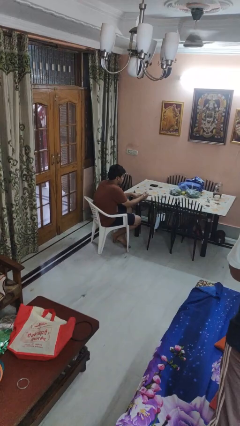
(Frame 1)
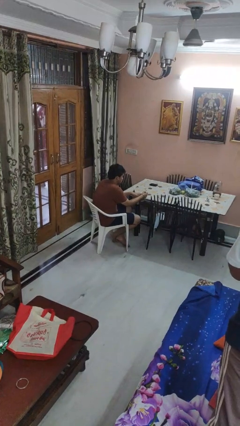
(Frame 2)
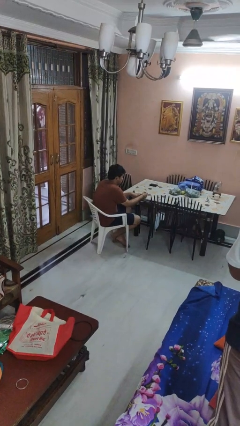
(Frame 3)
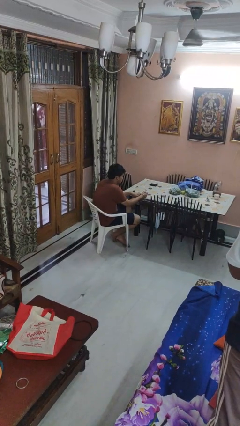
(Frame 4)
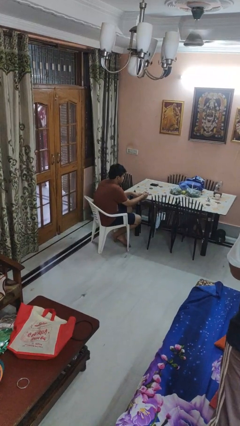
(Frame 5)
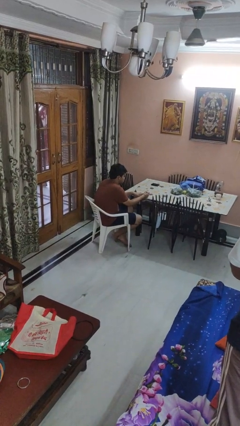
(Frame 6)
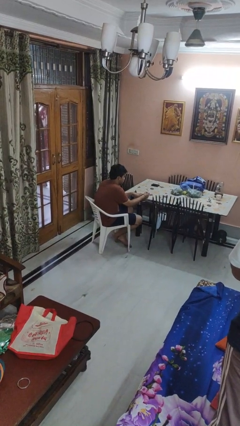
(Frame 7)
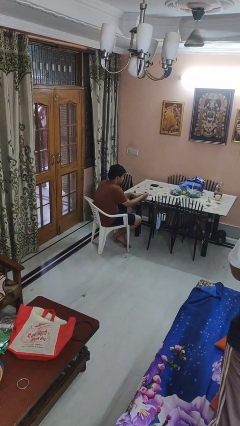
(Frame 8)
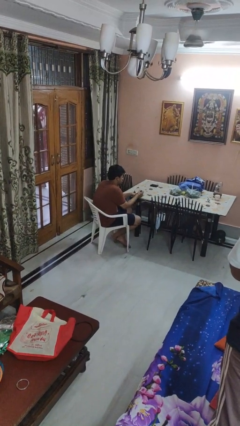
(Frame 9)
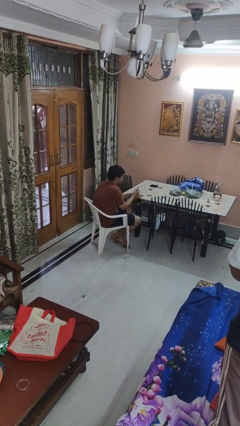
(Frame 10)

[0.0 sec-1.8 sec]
person paints fingernails

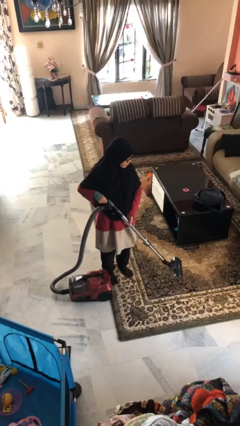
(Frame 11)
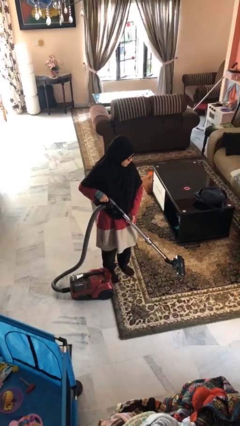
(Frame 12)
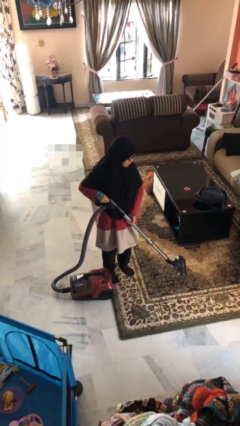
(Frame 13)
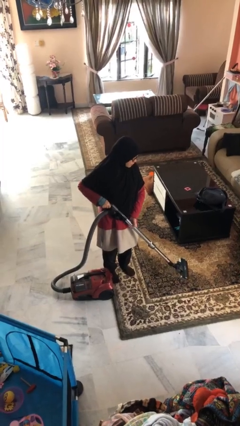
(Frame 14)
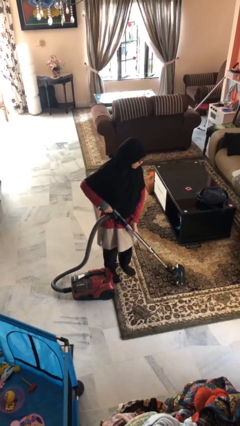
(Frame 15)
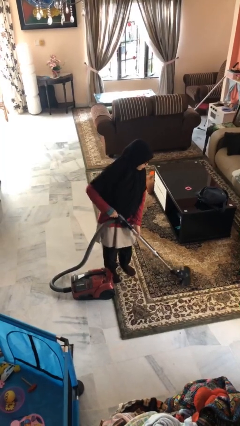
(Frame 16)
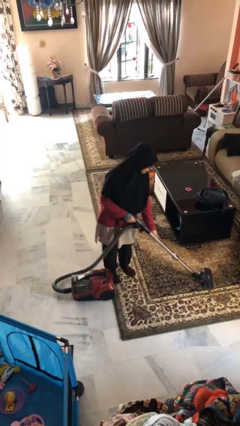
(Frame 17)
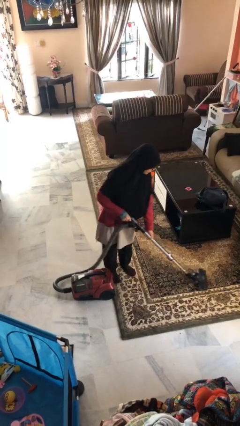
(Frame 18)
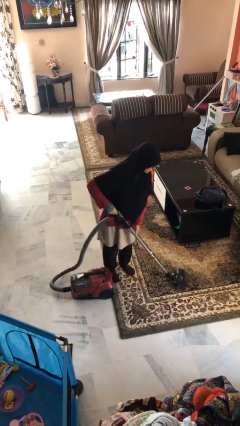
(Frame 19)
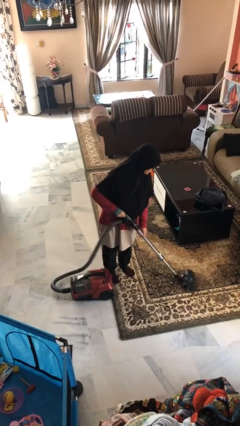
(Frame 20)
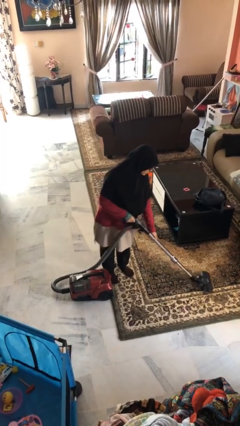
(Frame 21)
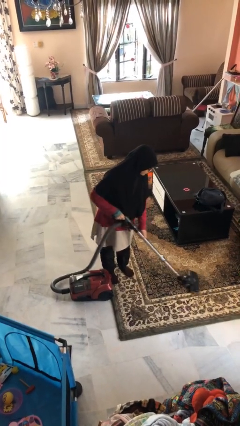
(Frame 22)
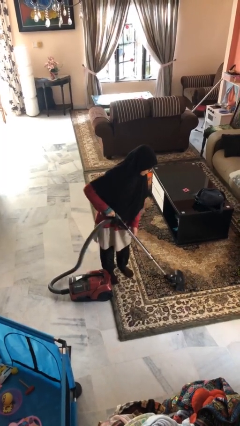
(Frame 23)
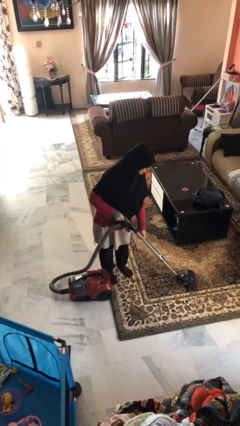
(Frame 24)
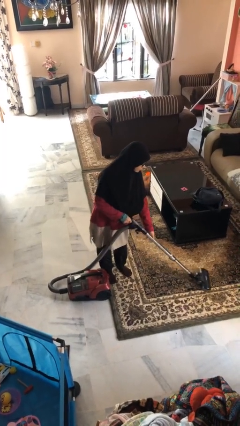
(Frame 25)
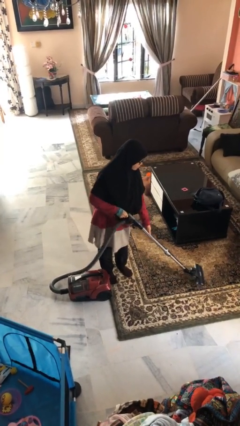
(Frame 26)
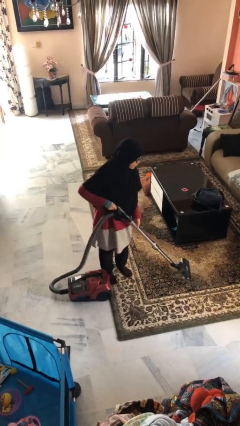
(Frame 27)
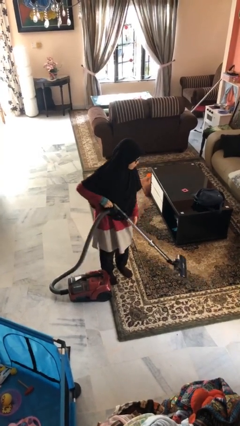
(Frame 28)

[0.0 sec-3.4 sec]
person vacuums carpet

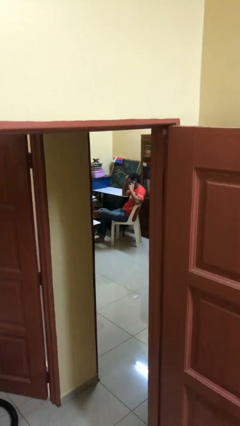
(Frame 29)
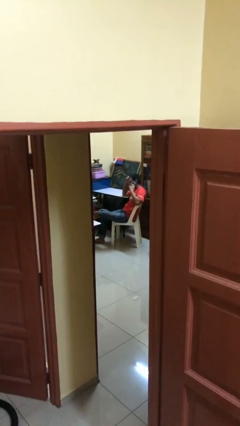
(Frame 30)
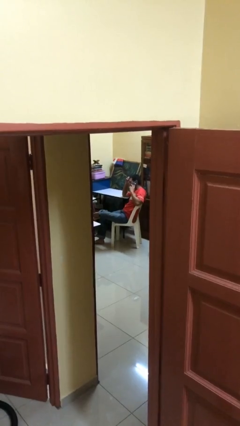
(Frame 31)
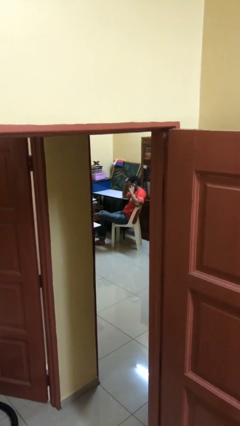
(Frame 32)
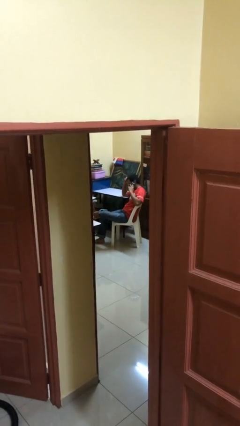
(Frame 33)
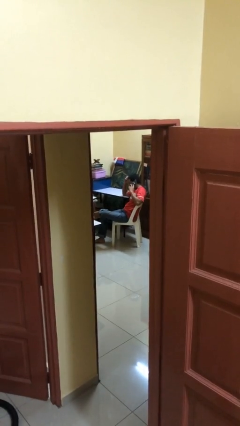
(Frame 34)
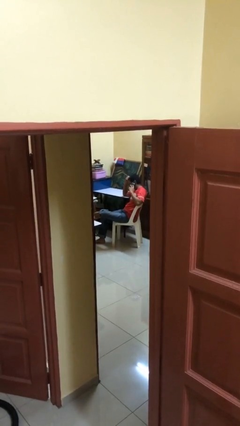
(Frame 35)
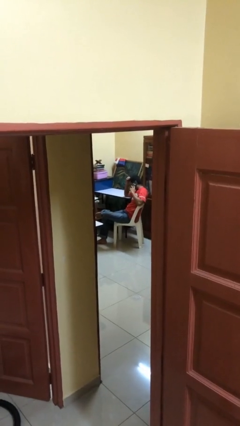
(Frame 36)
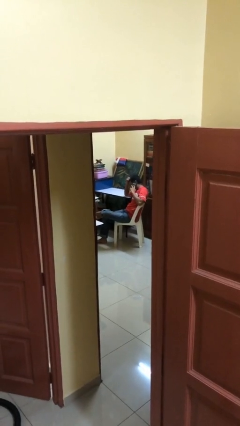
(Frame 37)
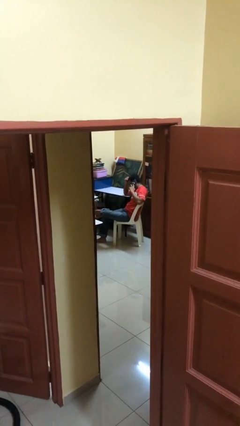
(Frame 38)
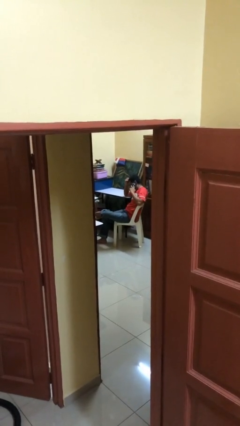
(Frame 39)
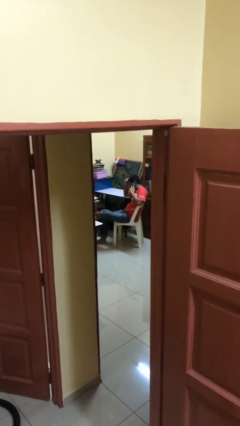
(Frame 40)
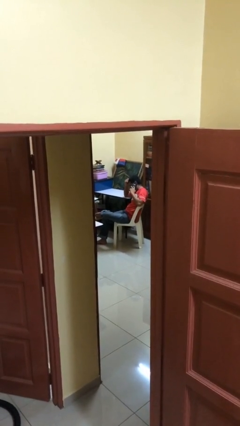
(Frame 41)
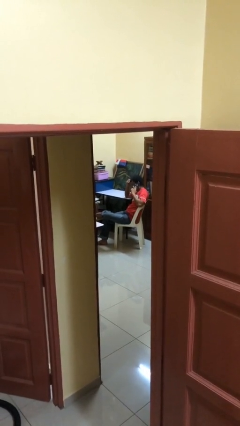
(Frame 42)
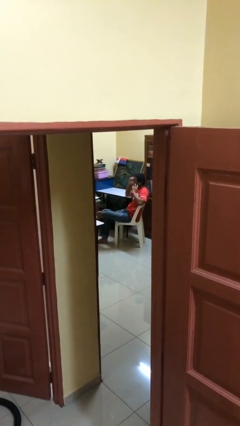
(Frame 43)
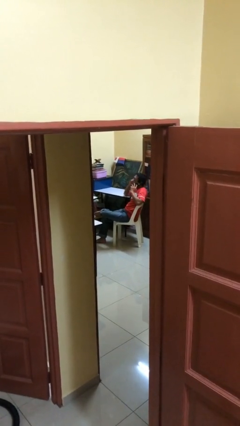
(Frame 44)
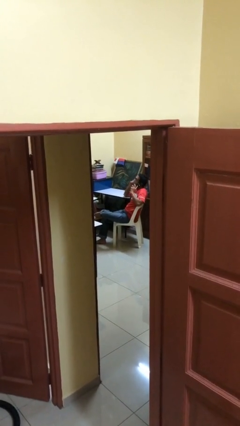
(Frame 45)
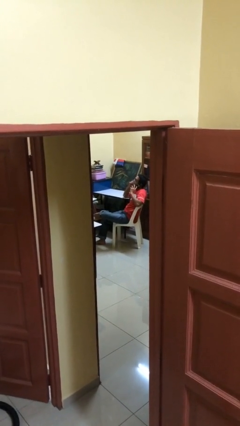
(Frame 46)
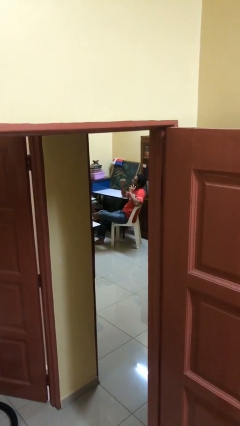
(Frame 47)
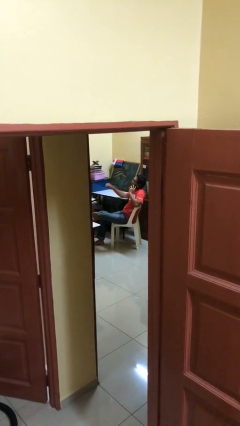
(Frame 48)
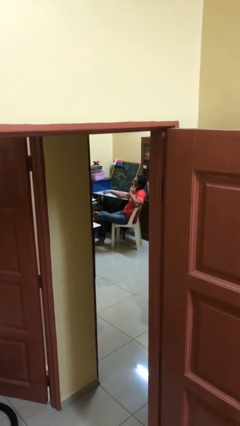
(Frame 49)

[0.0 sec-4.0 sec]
person talks on phone

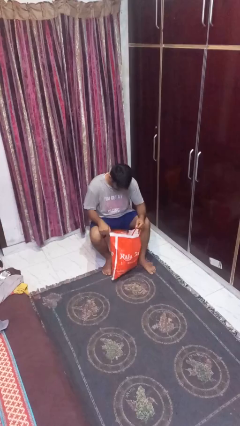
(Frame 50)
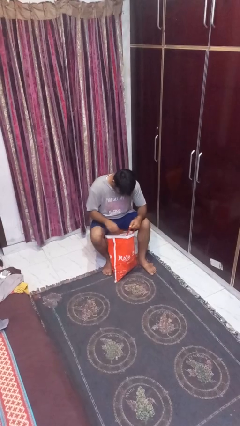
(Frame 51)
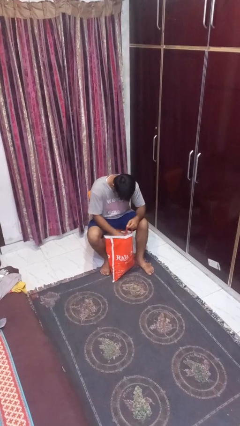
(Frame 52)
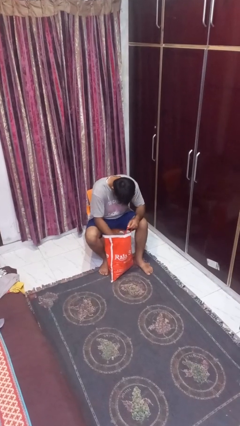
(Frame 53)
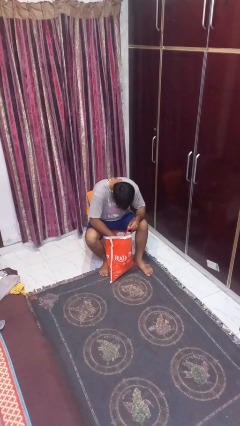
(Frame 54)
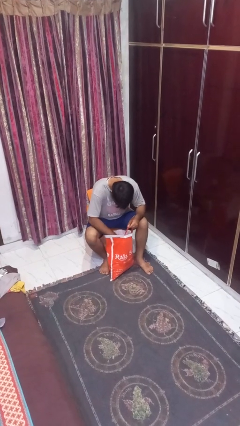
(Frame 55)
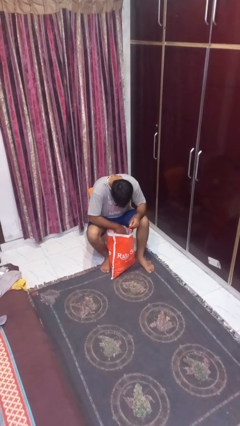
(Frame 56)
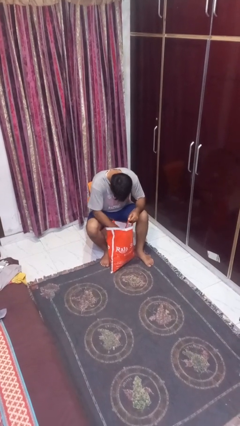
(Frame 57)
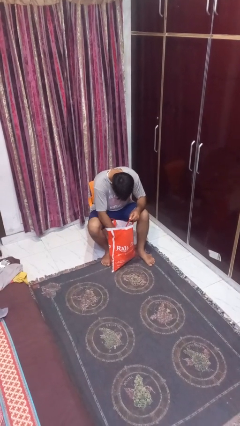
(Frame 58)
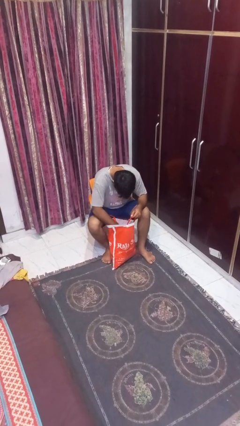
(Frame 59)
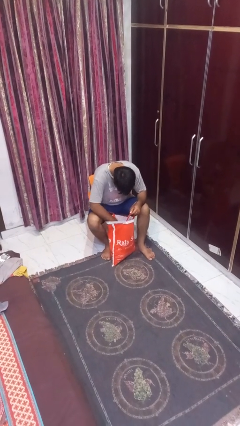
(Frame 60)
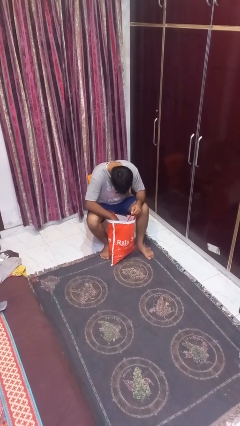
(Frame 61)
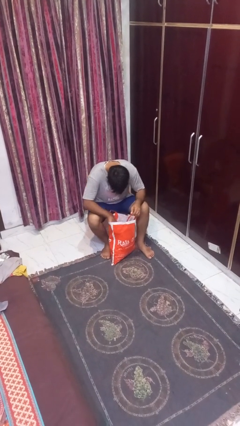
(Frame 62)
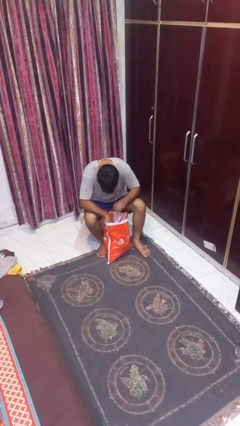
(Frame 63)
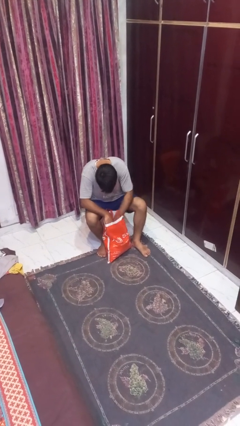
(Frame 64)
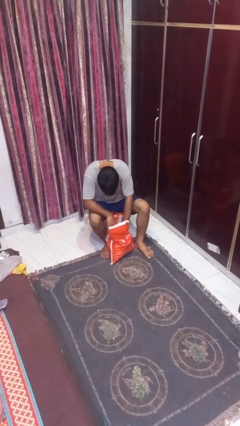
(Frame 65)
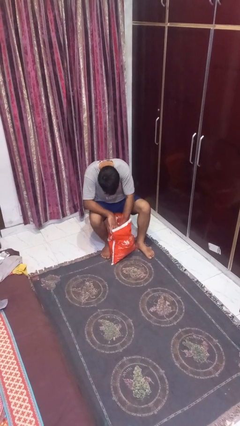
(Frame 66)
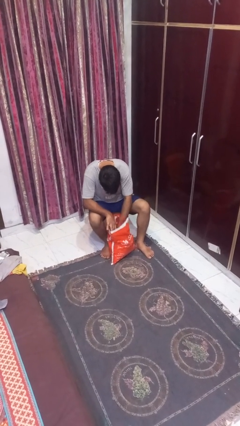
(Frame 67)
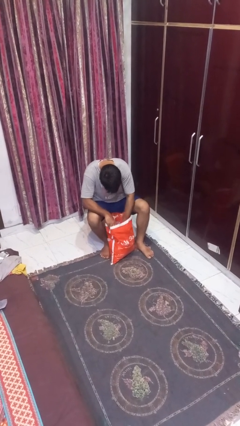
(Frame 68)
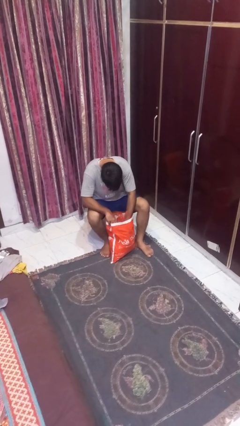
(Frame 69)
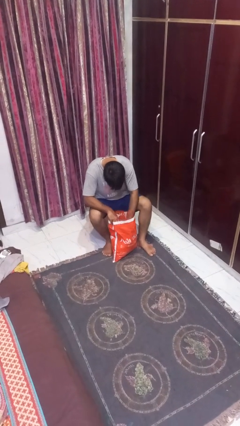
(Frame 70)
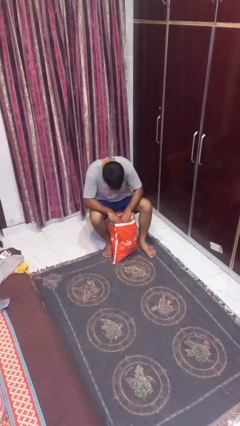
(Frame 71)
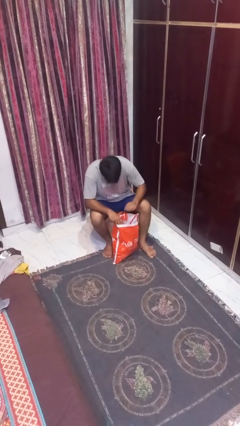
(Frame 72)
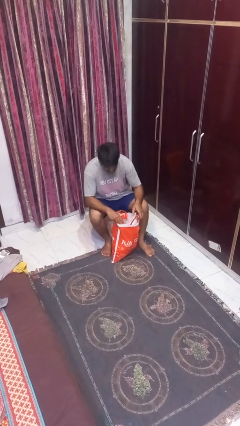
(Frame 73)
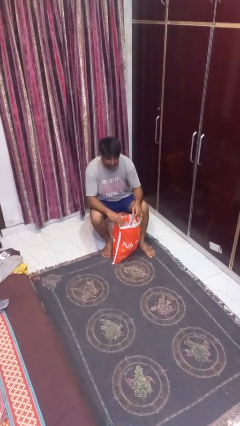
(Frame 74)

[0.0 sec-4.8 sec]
person searches in bag

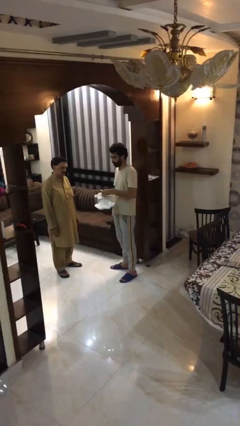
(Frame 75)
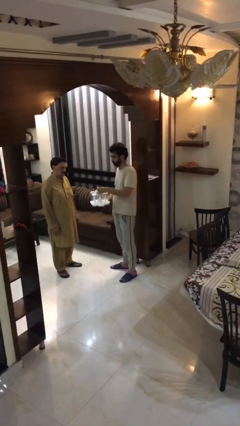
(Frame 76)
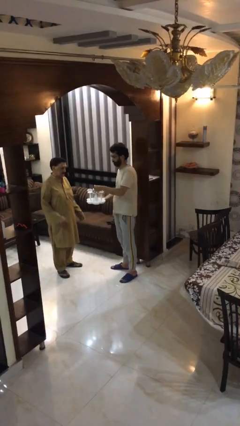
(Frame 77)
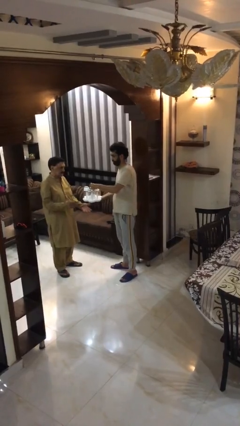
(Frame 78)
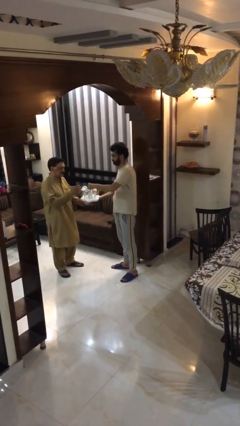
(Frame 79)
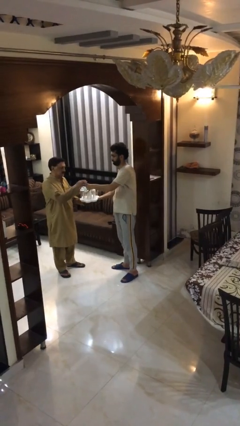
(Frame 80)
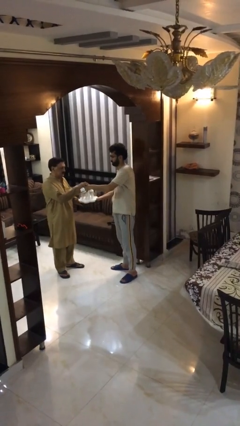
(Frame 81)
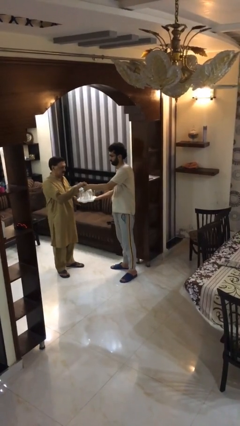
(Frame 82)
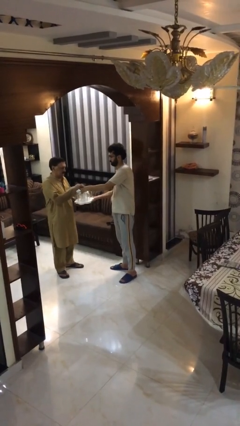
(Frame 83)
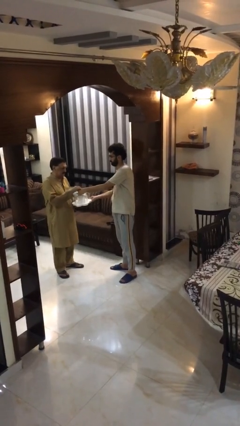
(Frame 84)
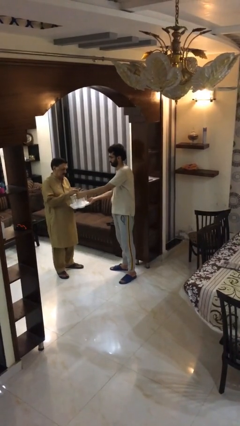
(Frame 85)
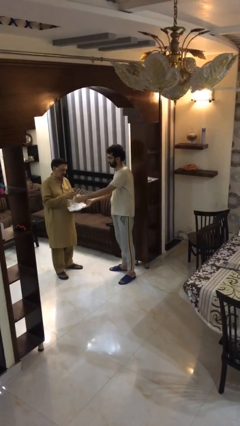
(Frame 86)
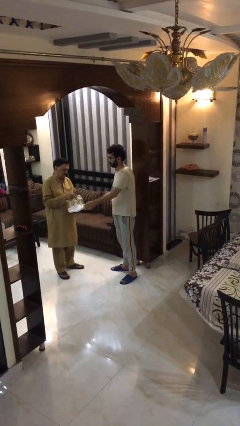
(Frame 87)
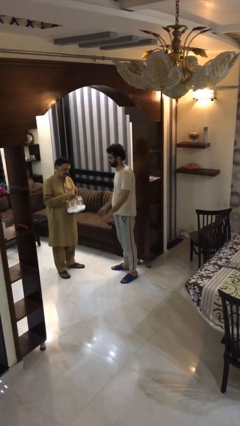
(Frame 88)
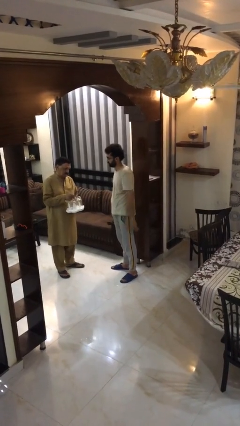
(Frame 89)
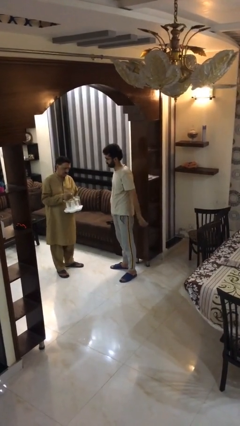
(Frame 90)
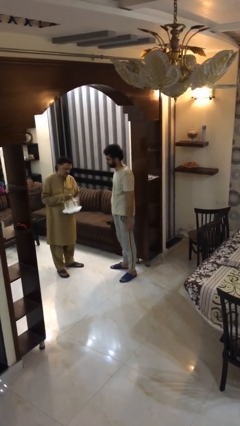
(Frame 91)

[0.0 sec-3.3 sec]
person transfers object to person

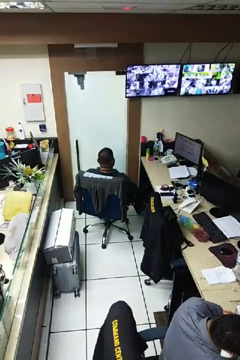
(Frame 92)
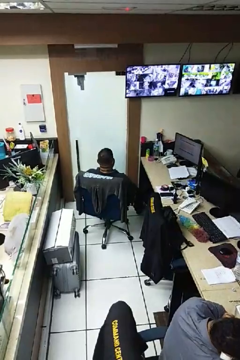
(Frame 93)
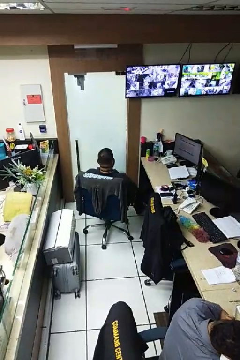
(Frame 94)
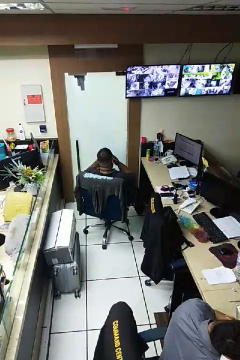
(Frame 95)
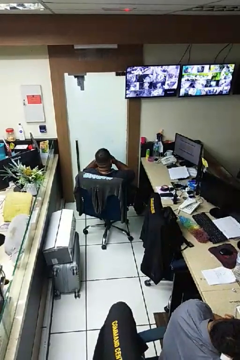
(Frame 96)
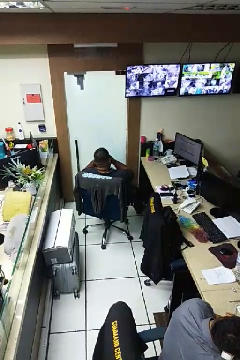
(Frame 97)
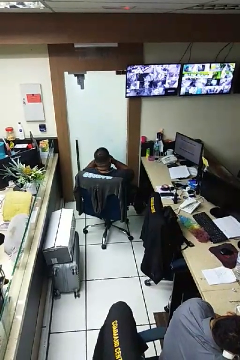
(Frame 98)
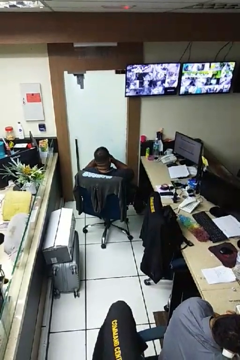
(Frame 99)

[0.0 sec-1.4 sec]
person covers face with hands
